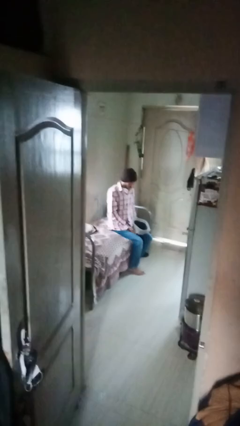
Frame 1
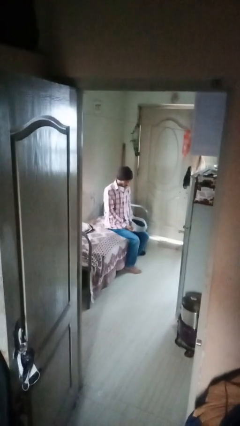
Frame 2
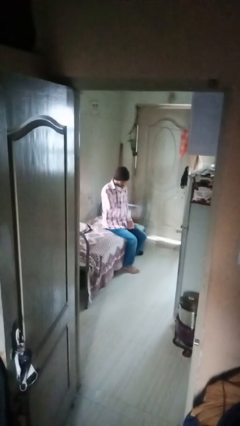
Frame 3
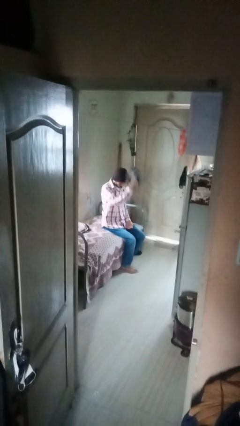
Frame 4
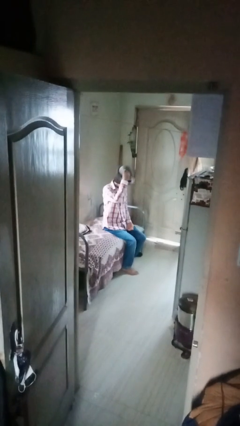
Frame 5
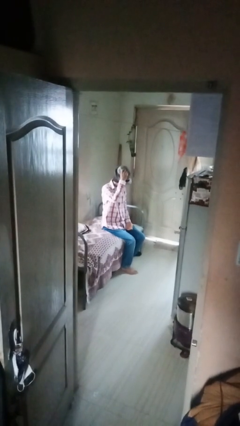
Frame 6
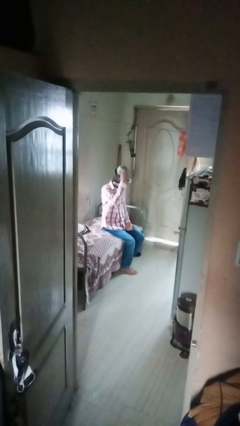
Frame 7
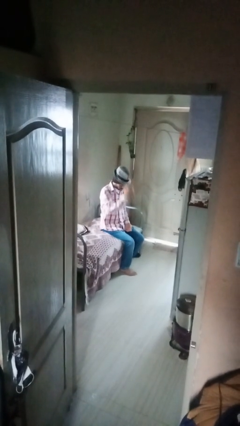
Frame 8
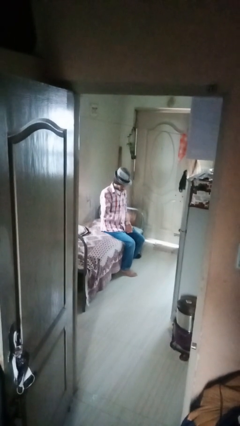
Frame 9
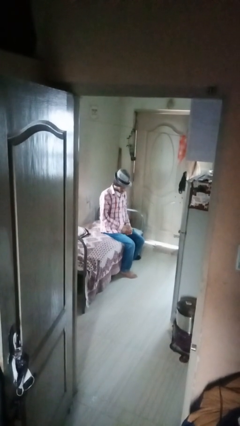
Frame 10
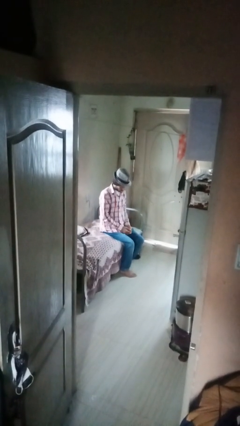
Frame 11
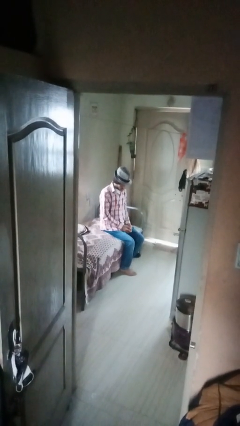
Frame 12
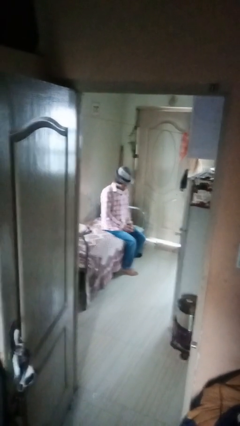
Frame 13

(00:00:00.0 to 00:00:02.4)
person puts on hat

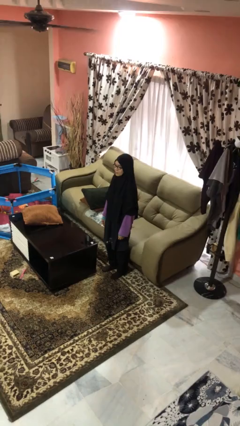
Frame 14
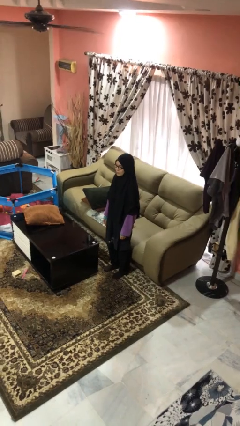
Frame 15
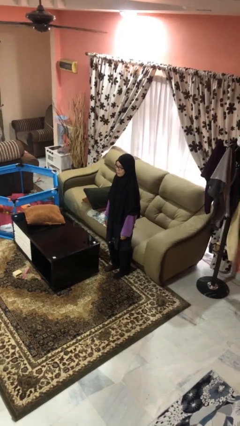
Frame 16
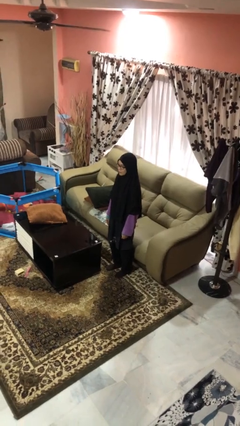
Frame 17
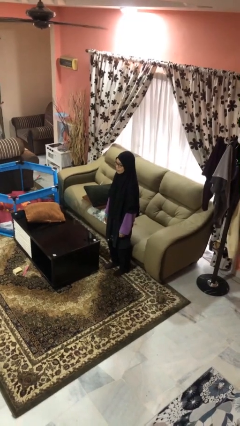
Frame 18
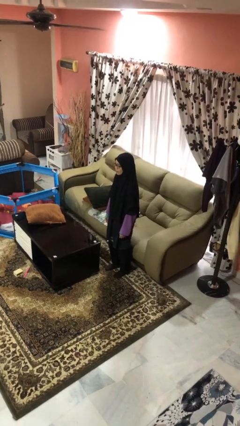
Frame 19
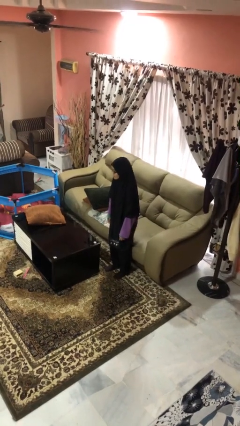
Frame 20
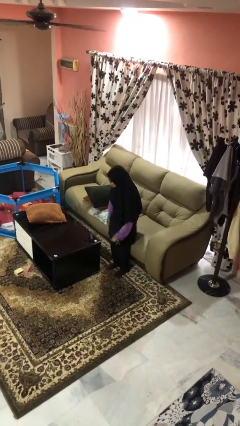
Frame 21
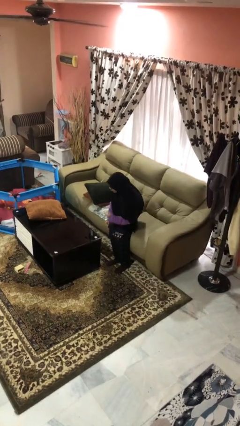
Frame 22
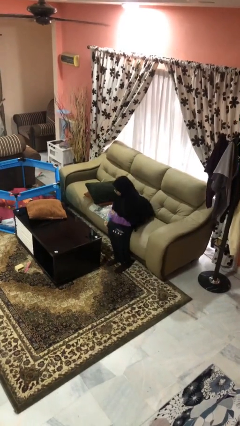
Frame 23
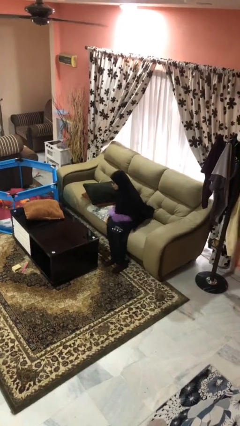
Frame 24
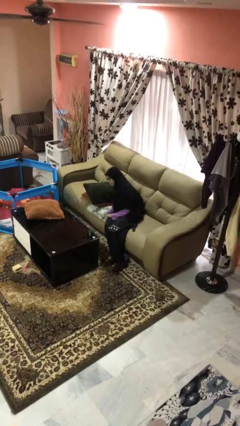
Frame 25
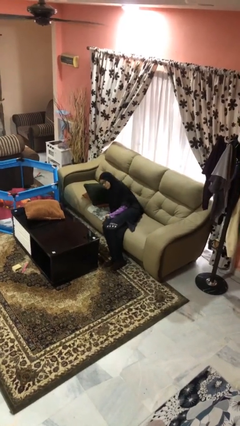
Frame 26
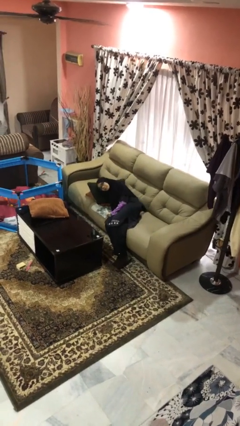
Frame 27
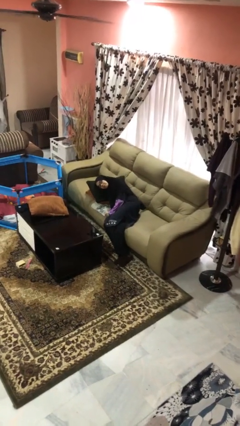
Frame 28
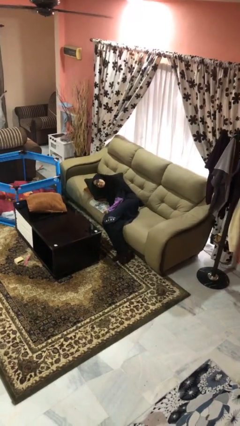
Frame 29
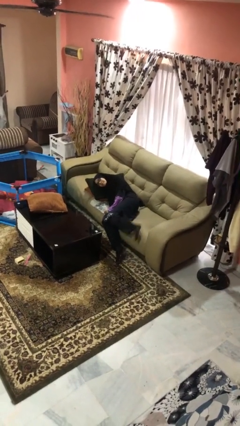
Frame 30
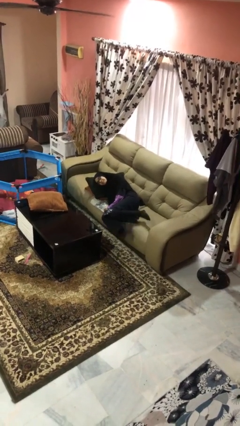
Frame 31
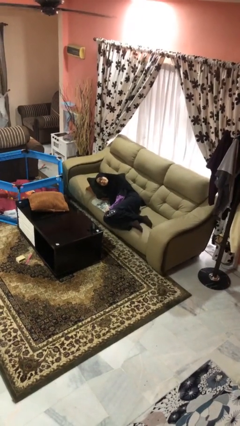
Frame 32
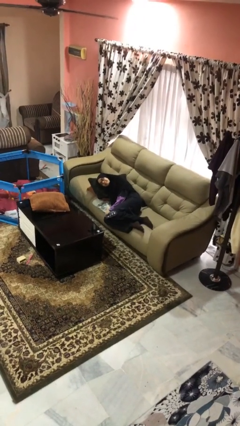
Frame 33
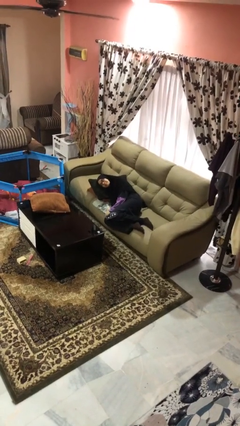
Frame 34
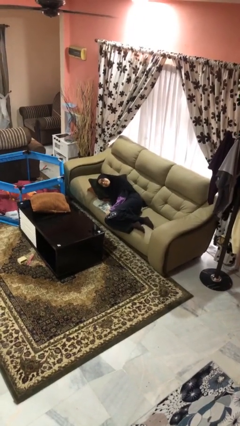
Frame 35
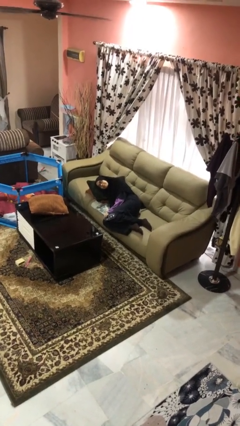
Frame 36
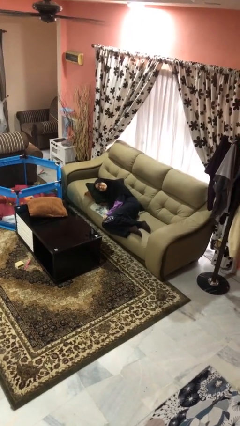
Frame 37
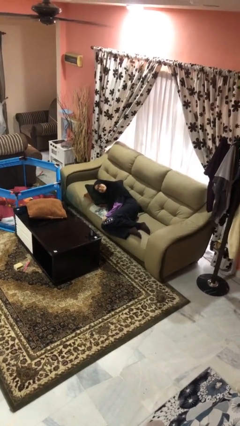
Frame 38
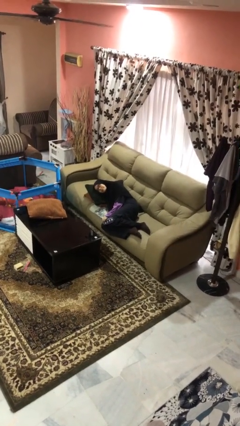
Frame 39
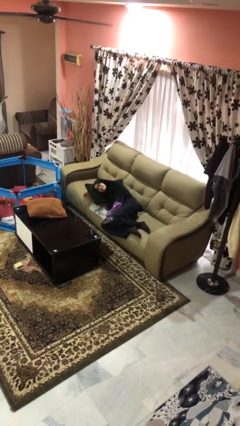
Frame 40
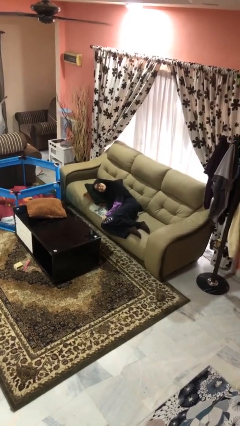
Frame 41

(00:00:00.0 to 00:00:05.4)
person lies down on couch

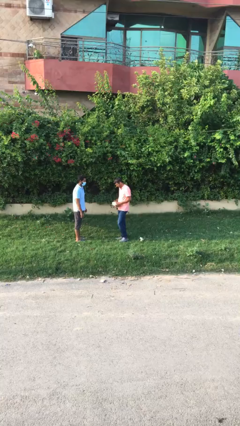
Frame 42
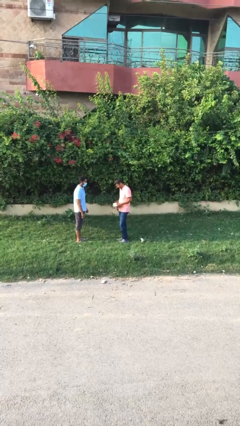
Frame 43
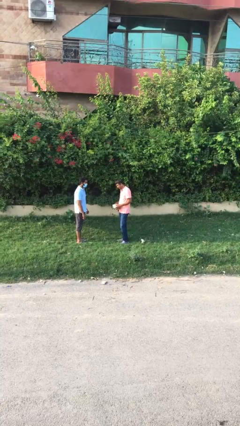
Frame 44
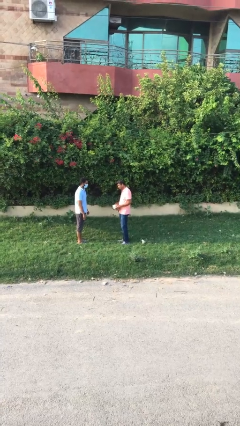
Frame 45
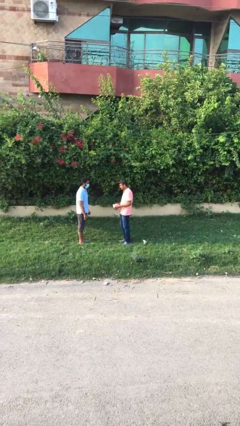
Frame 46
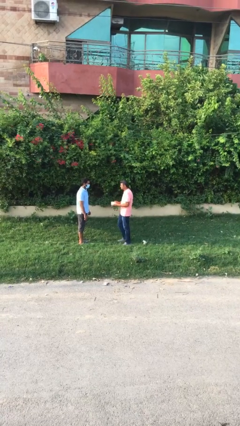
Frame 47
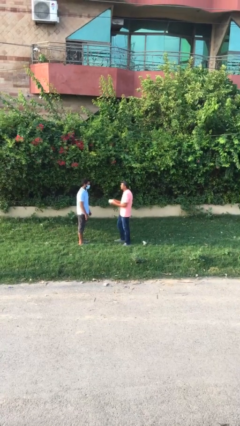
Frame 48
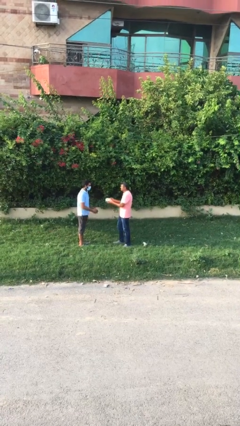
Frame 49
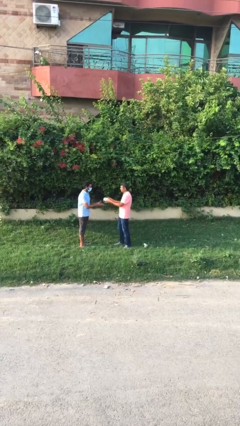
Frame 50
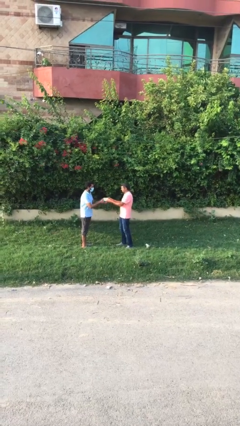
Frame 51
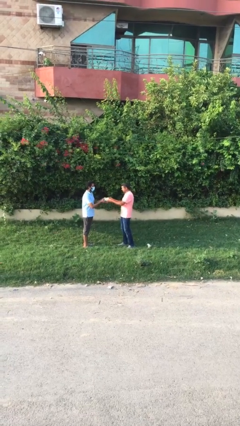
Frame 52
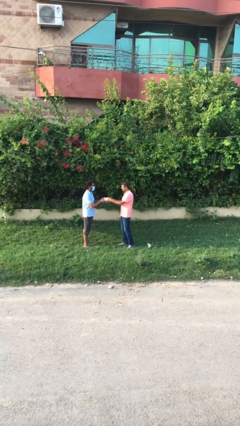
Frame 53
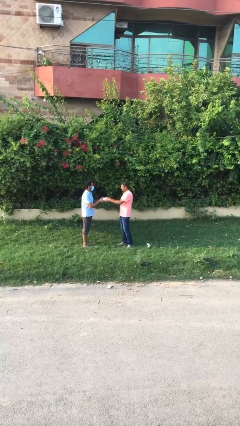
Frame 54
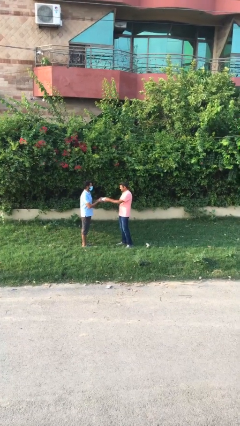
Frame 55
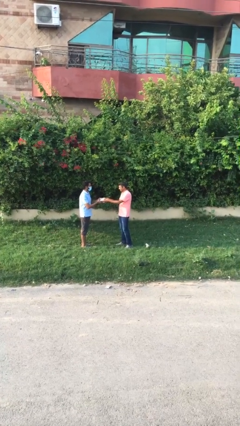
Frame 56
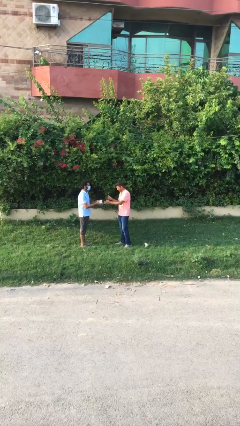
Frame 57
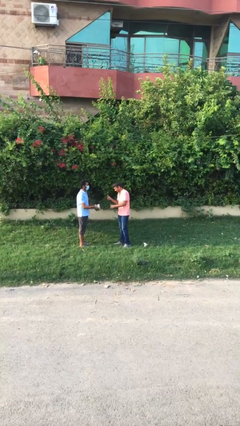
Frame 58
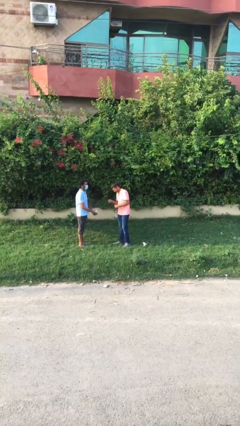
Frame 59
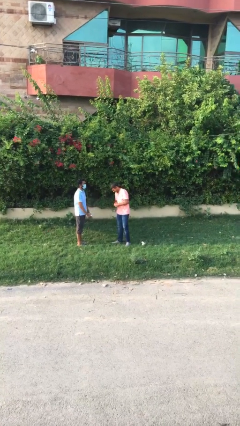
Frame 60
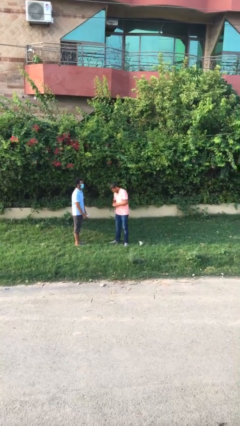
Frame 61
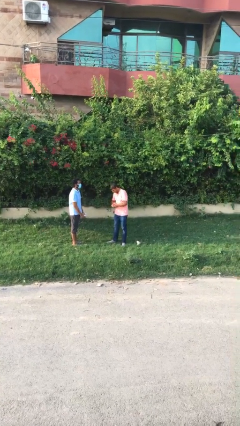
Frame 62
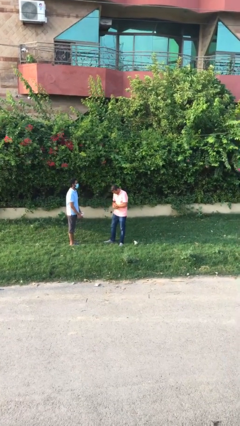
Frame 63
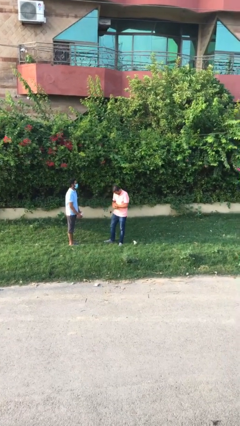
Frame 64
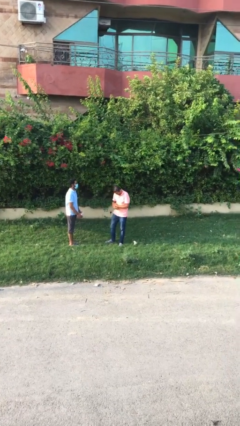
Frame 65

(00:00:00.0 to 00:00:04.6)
person transfers object to person

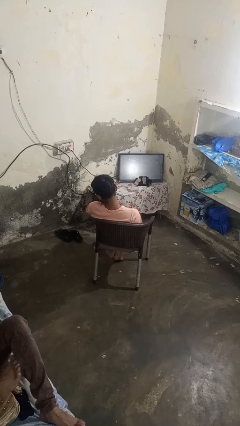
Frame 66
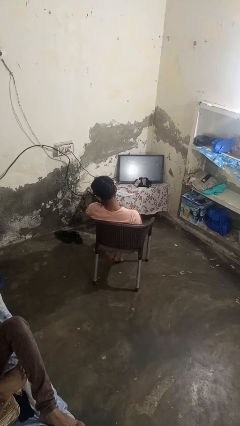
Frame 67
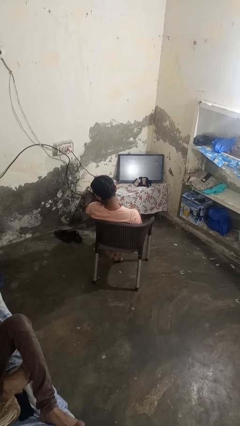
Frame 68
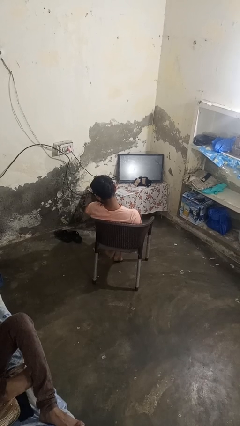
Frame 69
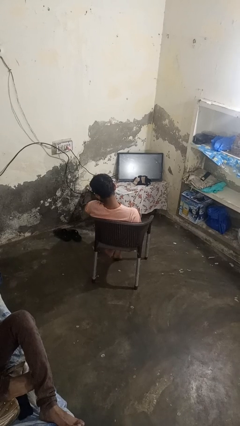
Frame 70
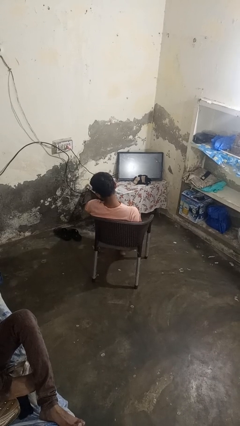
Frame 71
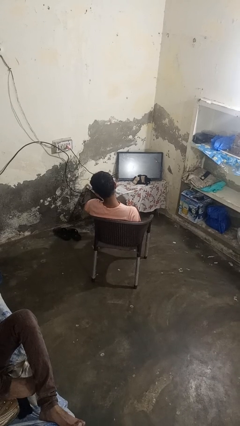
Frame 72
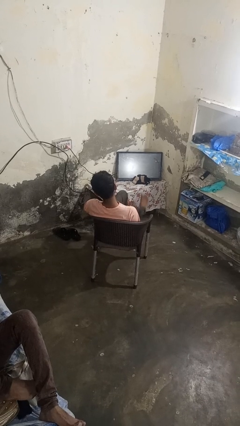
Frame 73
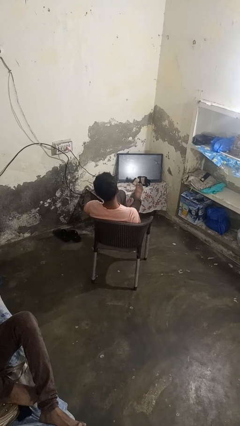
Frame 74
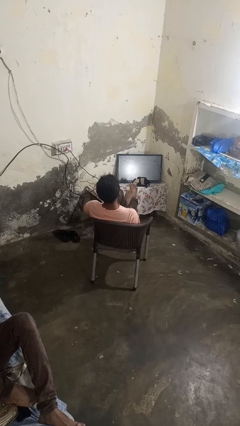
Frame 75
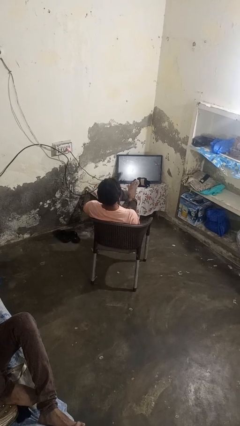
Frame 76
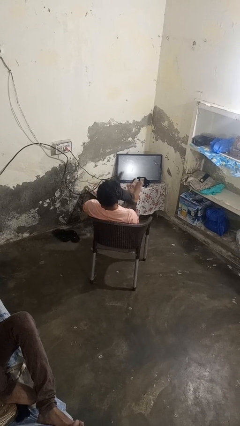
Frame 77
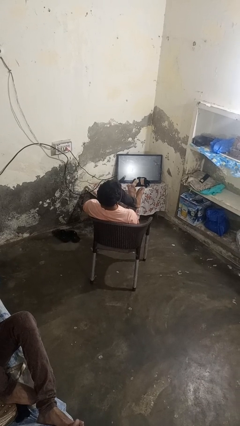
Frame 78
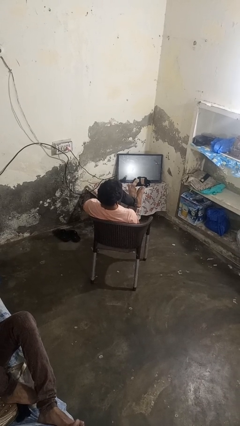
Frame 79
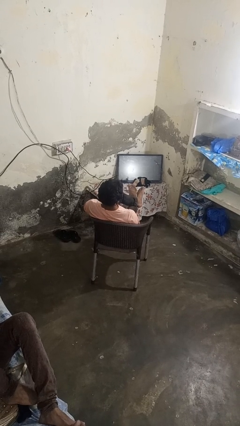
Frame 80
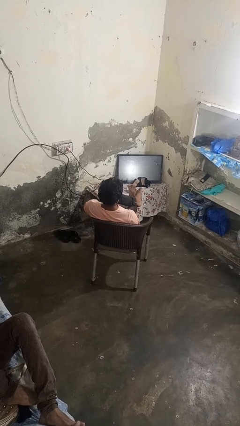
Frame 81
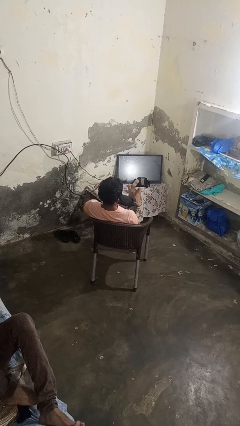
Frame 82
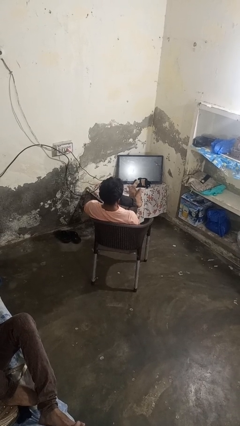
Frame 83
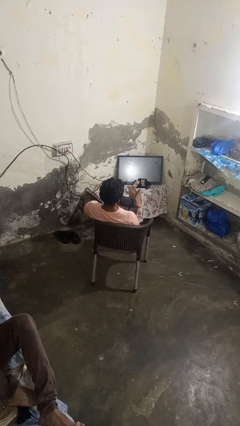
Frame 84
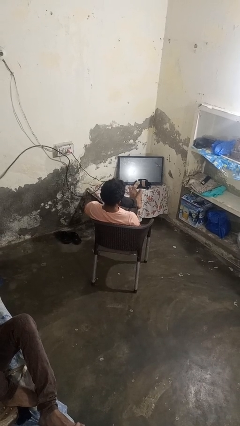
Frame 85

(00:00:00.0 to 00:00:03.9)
person puts feet up

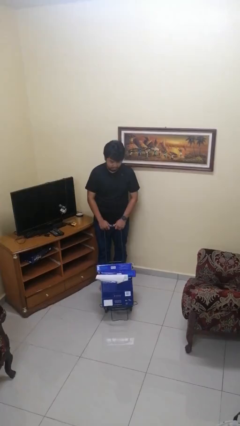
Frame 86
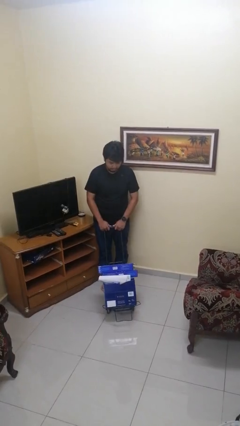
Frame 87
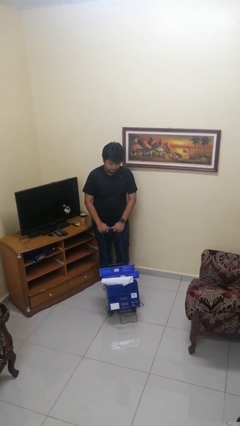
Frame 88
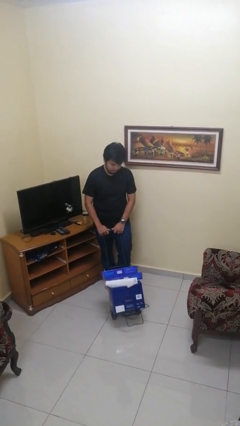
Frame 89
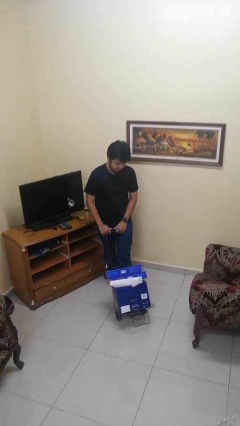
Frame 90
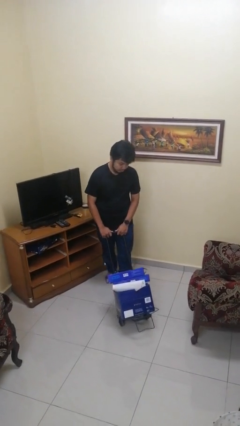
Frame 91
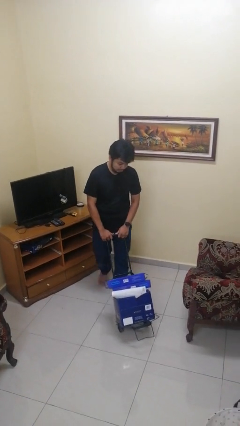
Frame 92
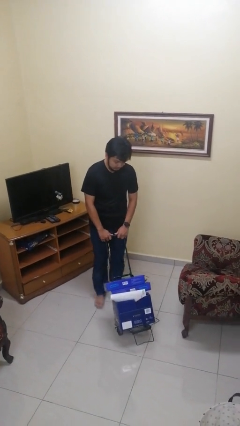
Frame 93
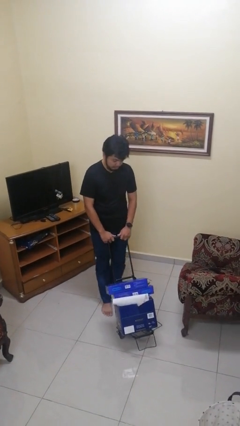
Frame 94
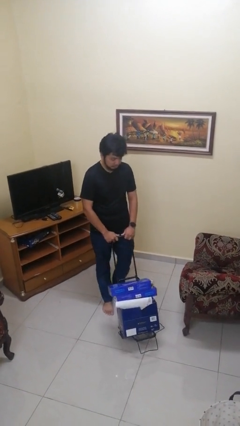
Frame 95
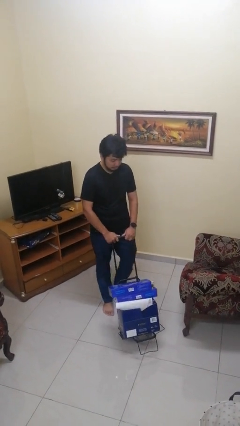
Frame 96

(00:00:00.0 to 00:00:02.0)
person pushes wheeled cart
